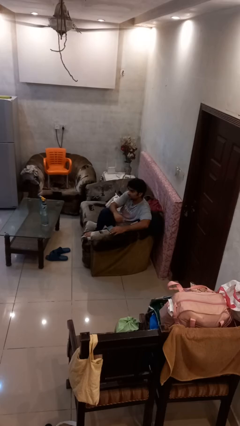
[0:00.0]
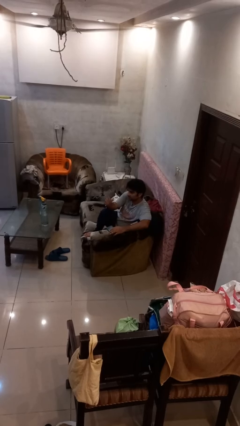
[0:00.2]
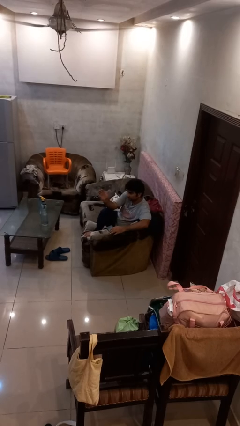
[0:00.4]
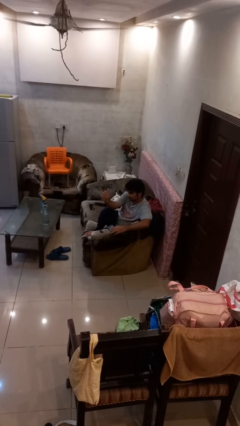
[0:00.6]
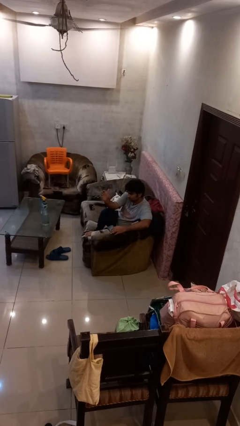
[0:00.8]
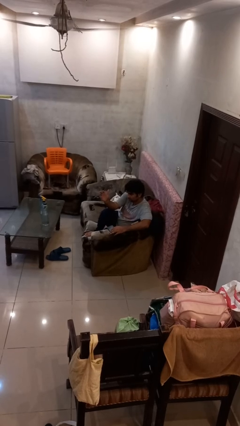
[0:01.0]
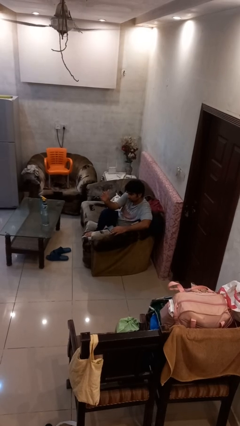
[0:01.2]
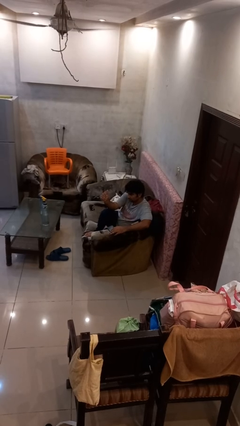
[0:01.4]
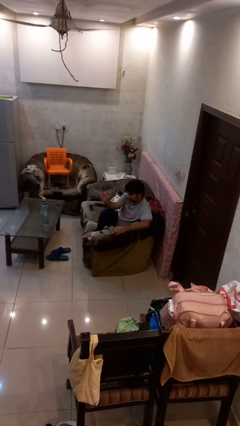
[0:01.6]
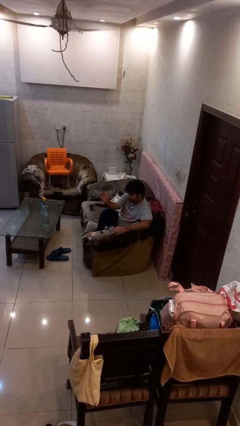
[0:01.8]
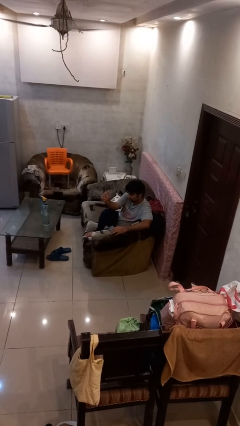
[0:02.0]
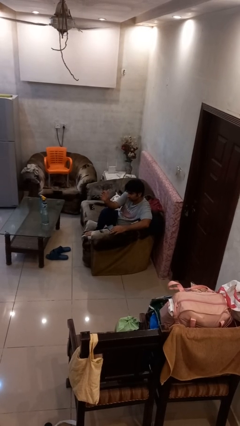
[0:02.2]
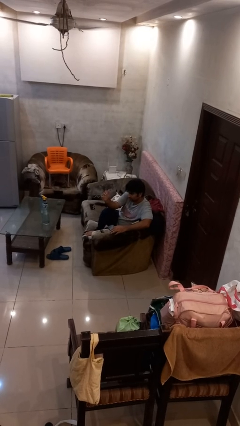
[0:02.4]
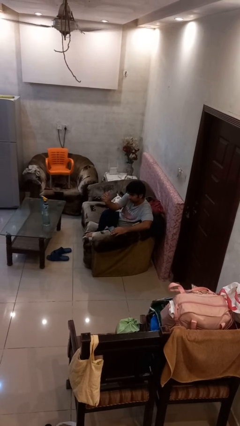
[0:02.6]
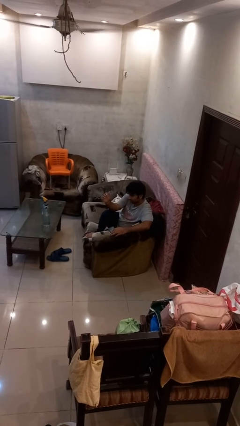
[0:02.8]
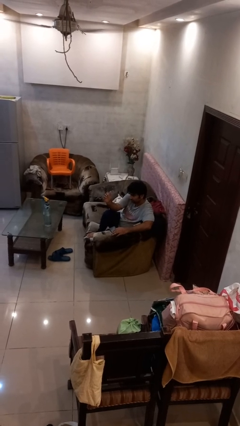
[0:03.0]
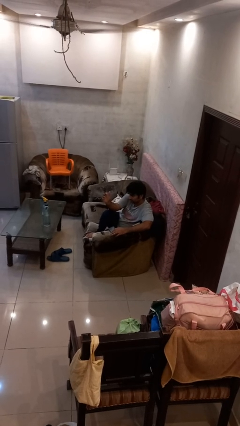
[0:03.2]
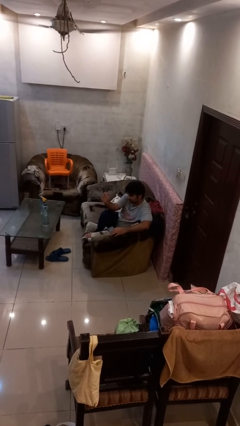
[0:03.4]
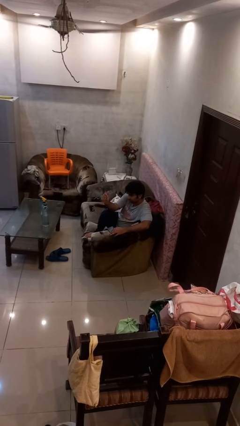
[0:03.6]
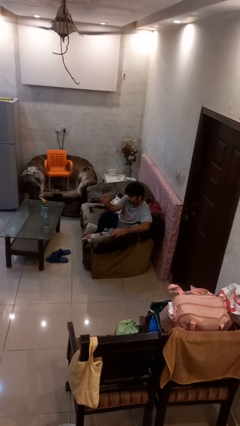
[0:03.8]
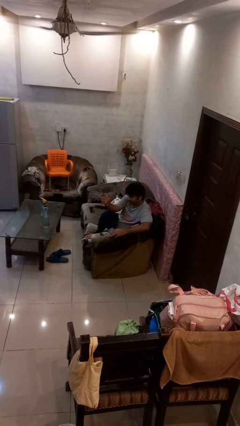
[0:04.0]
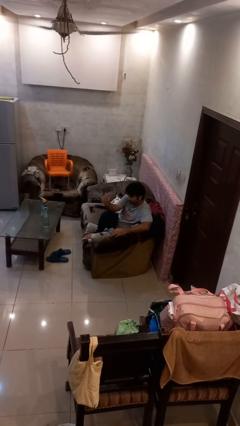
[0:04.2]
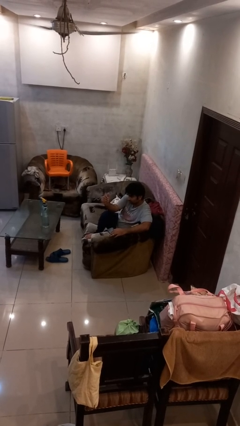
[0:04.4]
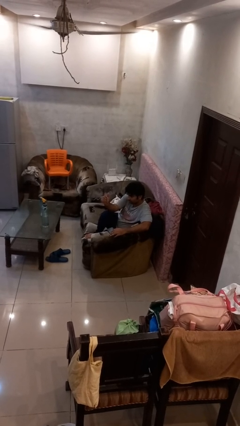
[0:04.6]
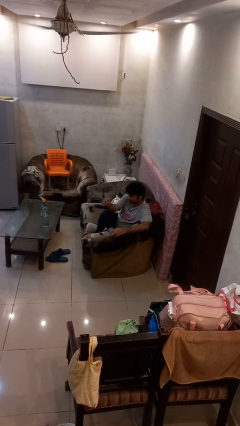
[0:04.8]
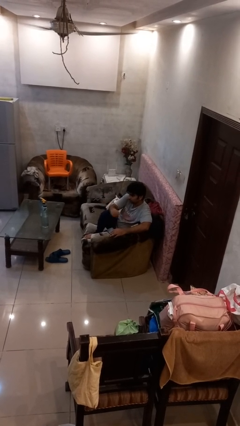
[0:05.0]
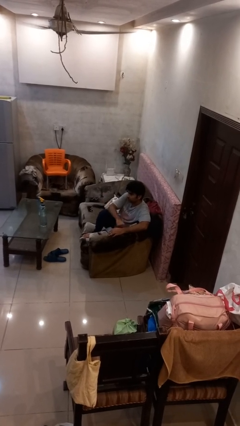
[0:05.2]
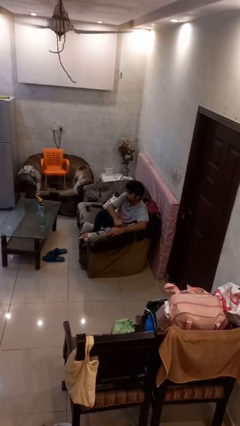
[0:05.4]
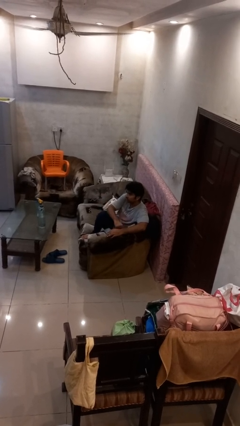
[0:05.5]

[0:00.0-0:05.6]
person gestures come here

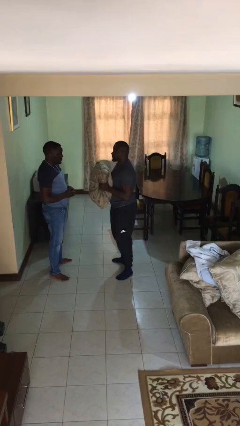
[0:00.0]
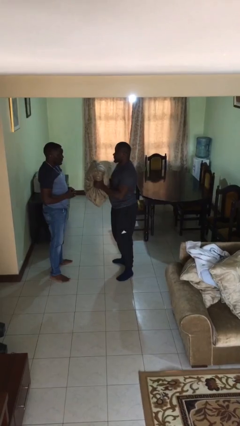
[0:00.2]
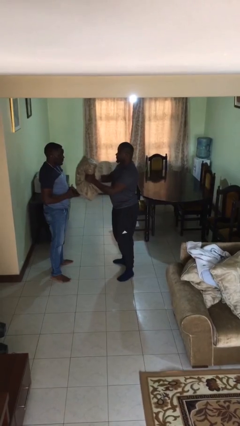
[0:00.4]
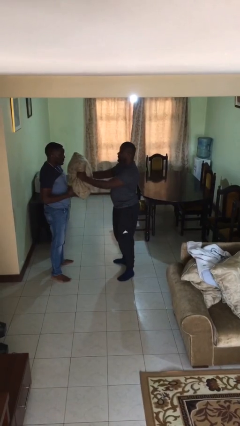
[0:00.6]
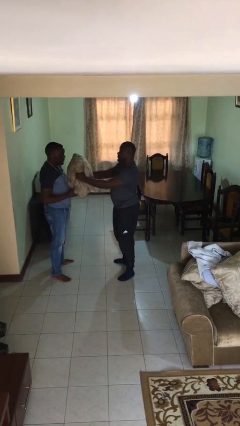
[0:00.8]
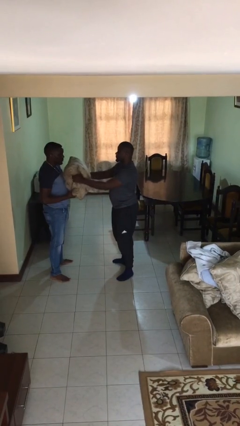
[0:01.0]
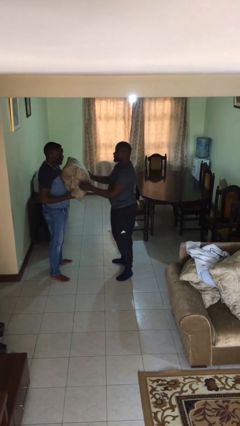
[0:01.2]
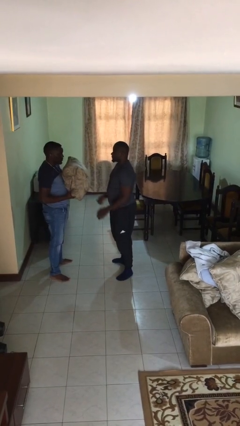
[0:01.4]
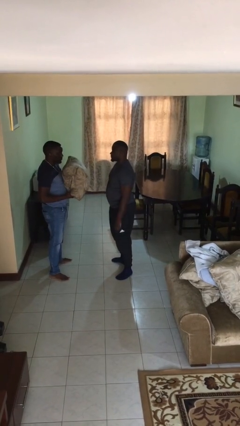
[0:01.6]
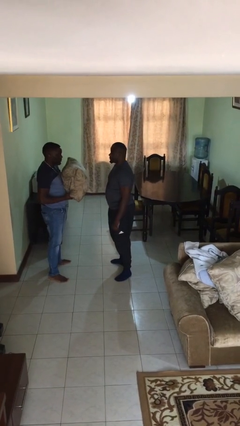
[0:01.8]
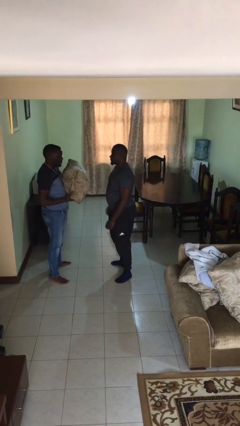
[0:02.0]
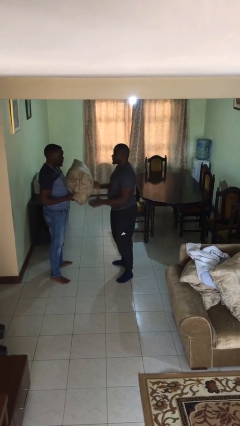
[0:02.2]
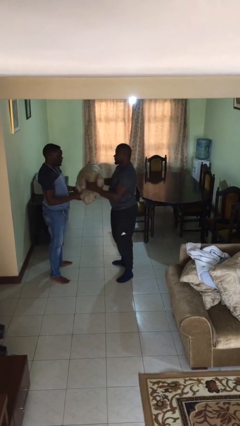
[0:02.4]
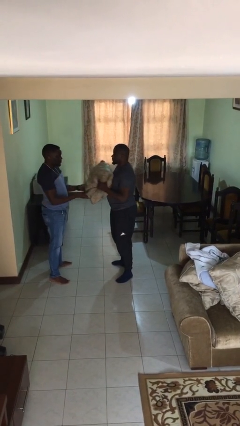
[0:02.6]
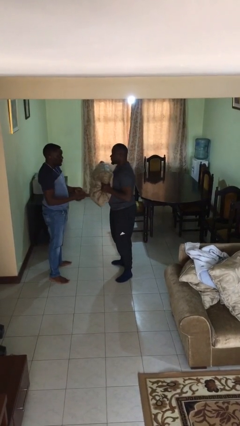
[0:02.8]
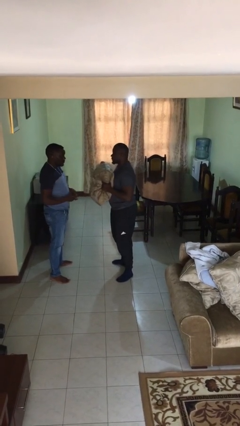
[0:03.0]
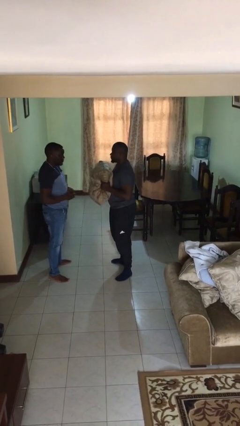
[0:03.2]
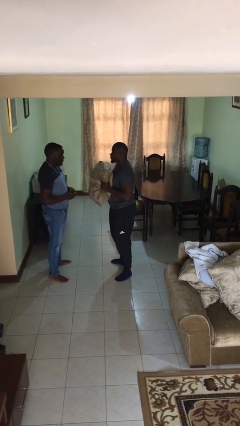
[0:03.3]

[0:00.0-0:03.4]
person transfers object to person

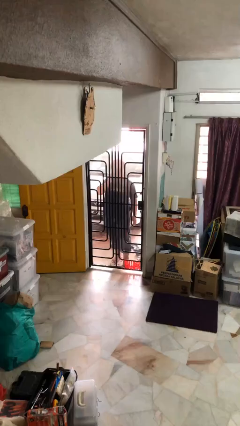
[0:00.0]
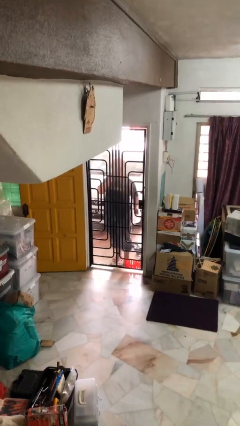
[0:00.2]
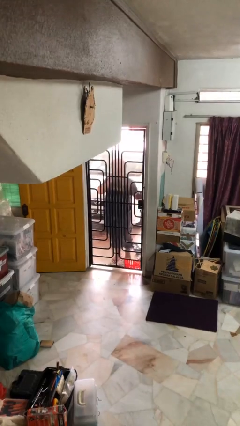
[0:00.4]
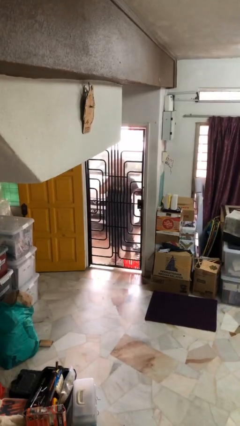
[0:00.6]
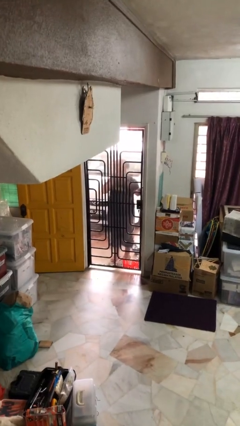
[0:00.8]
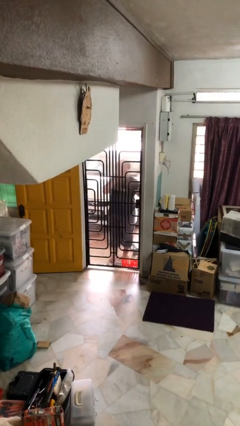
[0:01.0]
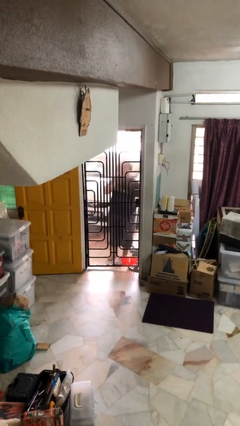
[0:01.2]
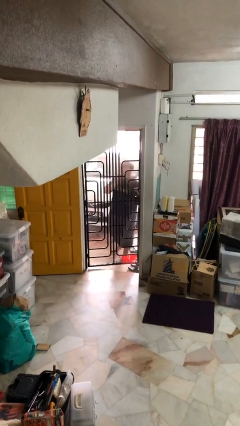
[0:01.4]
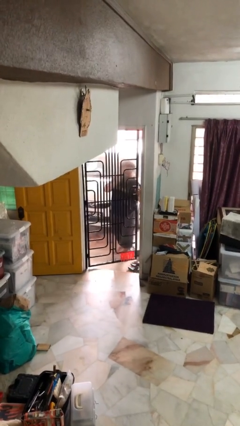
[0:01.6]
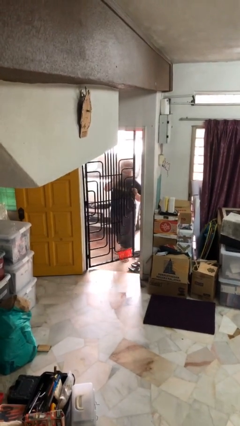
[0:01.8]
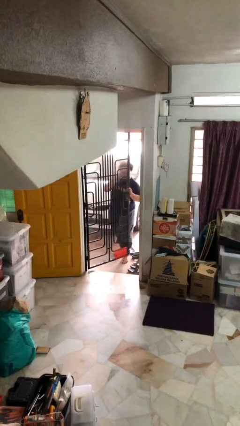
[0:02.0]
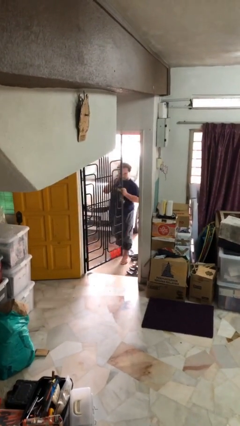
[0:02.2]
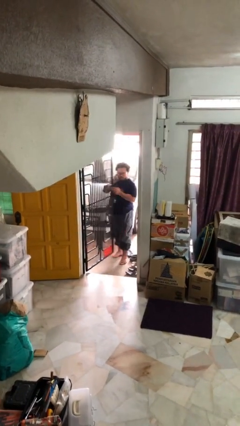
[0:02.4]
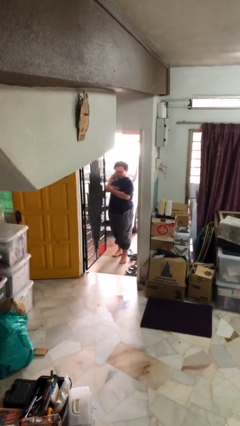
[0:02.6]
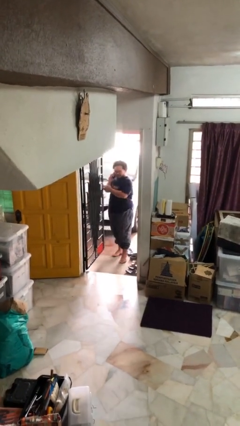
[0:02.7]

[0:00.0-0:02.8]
person opens facility door

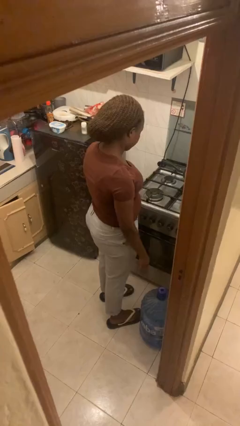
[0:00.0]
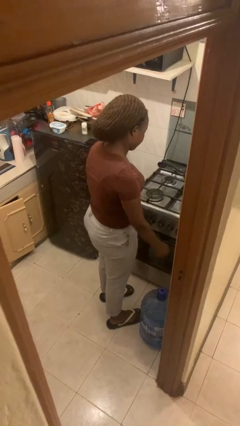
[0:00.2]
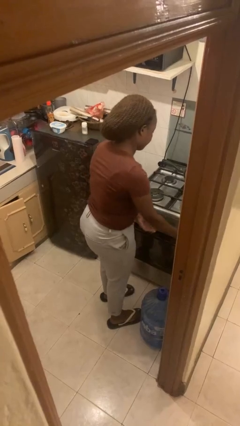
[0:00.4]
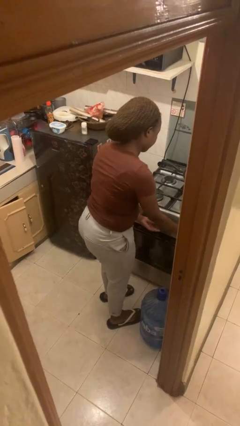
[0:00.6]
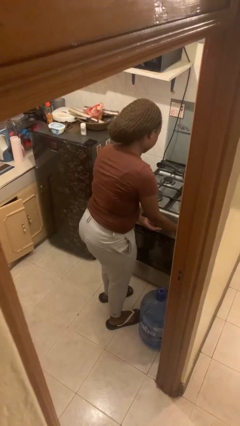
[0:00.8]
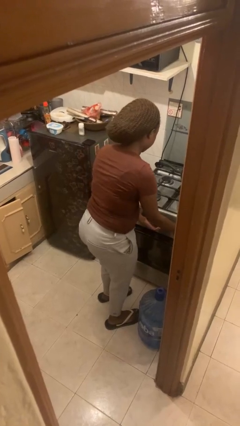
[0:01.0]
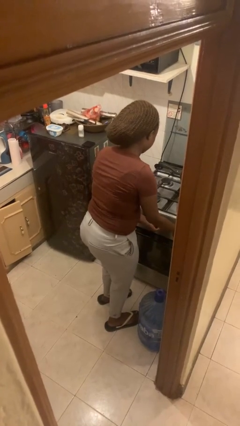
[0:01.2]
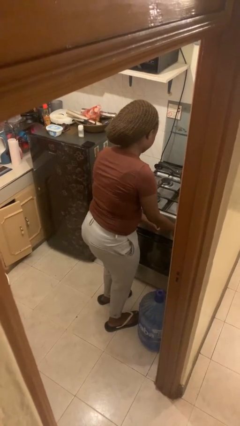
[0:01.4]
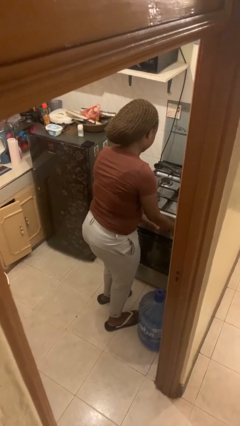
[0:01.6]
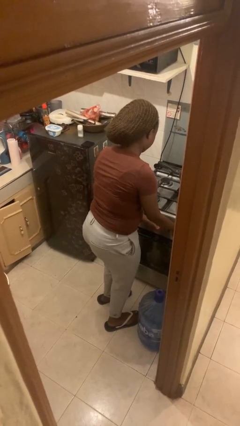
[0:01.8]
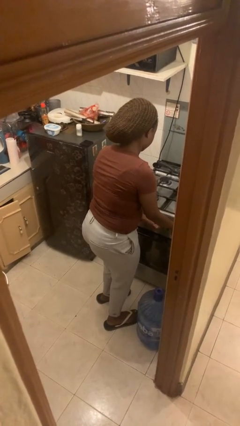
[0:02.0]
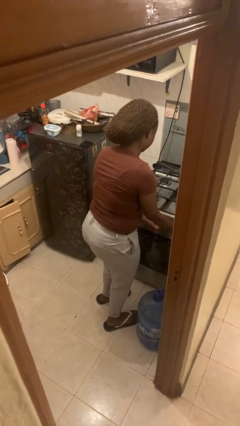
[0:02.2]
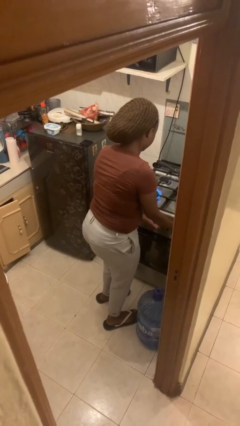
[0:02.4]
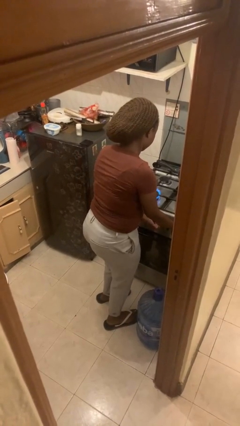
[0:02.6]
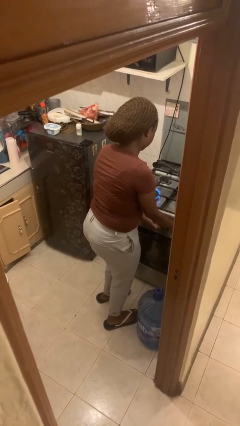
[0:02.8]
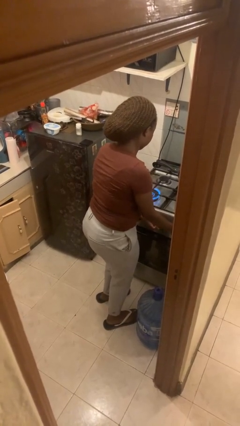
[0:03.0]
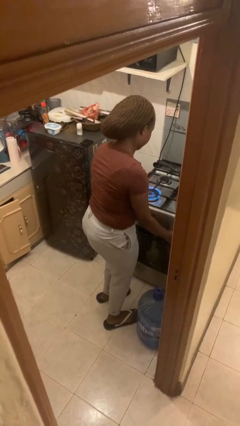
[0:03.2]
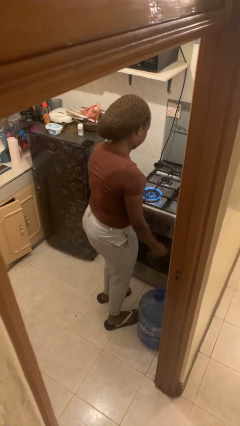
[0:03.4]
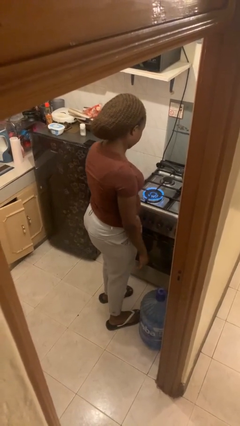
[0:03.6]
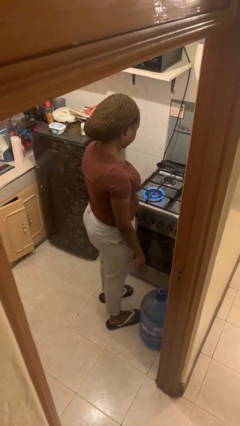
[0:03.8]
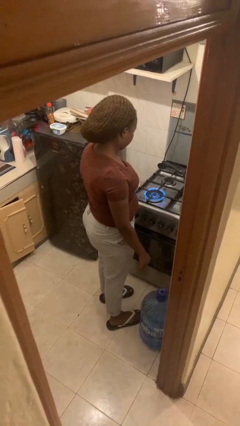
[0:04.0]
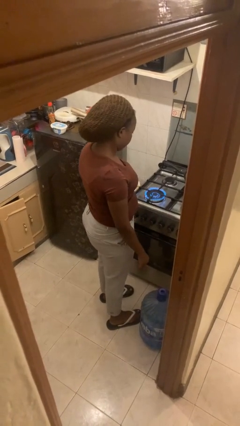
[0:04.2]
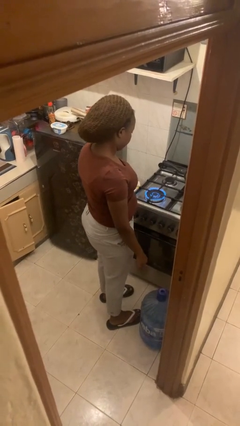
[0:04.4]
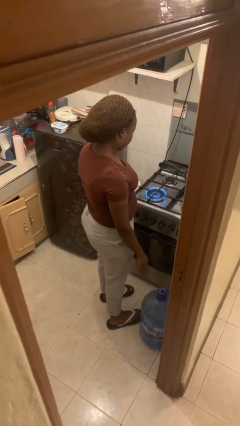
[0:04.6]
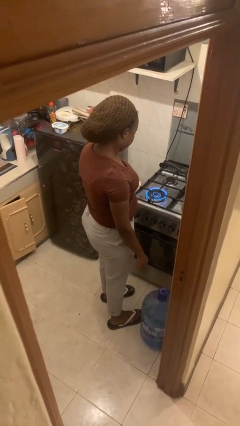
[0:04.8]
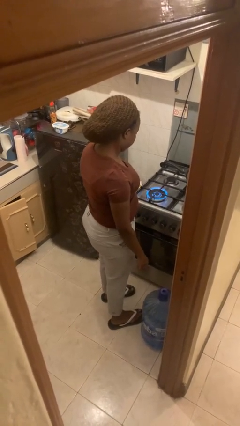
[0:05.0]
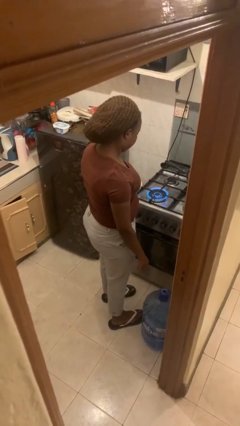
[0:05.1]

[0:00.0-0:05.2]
person turns on stovetop

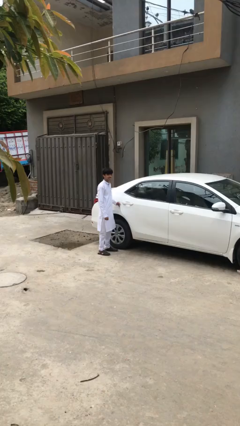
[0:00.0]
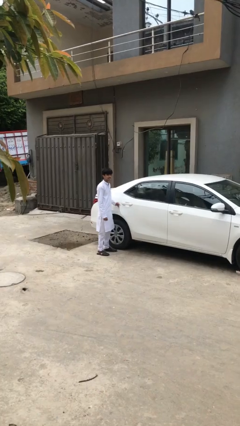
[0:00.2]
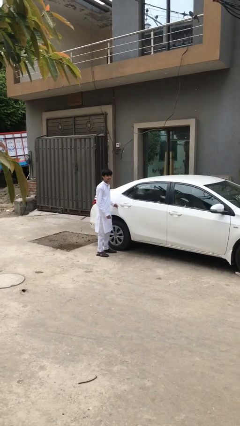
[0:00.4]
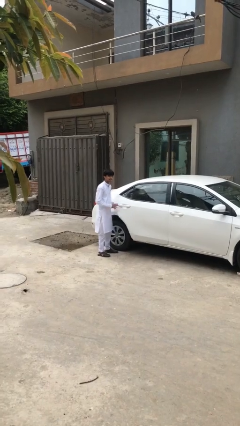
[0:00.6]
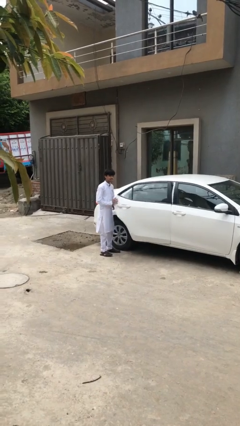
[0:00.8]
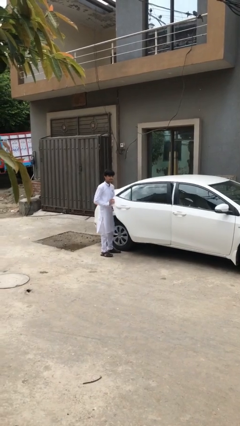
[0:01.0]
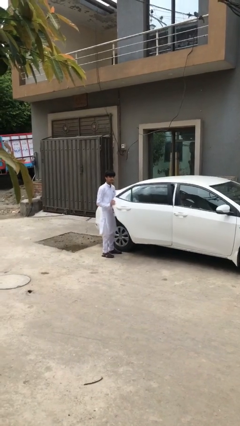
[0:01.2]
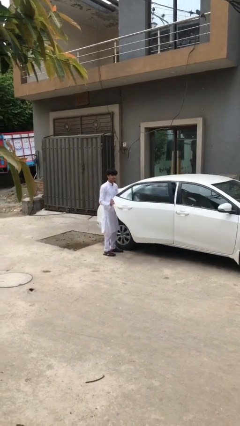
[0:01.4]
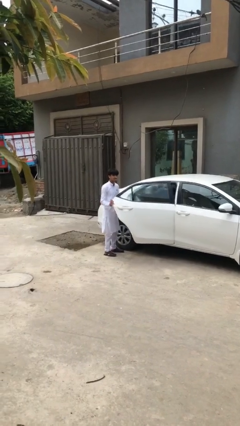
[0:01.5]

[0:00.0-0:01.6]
person opens car door
